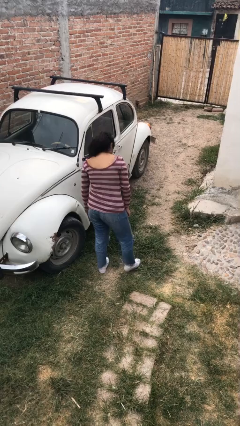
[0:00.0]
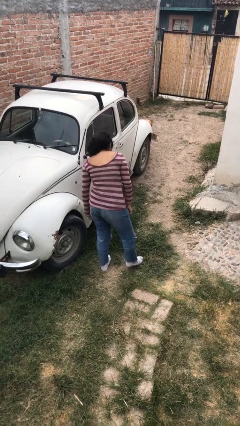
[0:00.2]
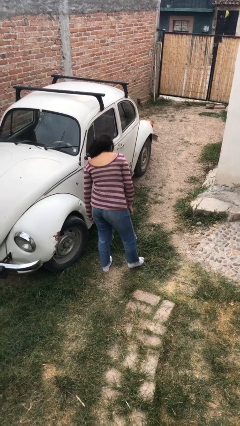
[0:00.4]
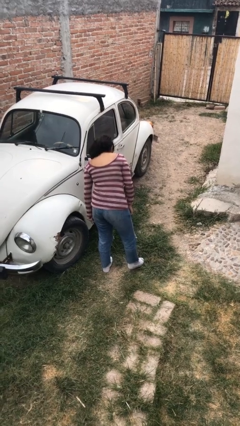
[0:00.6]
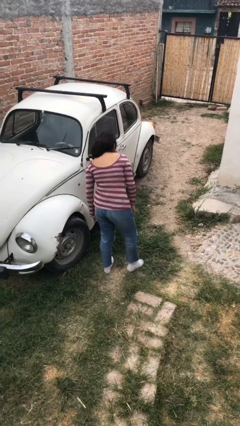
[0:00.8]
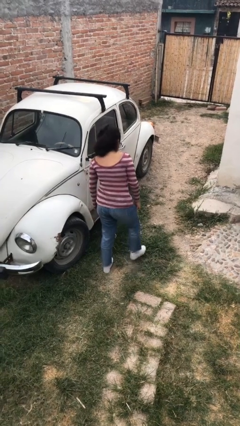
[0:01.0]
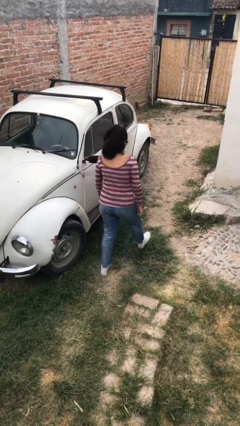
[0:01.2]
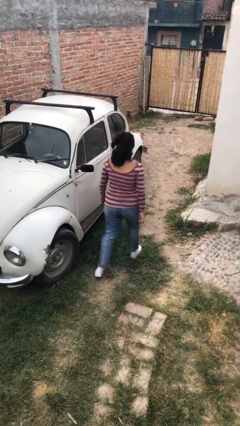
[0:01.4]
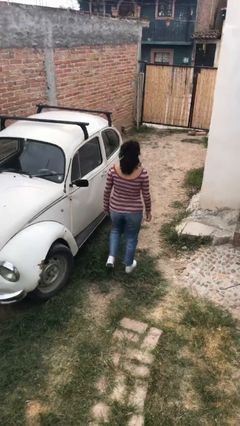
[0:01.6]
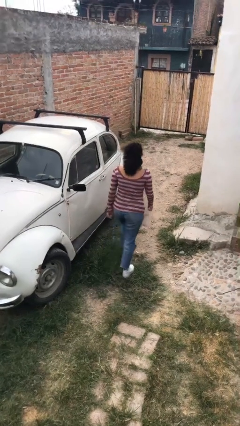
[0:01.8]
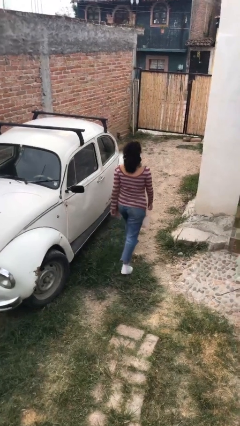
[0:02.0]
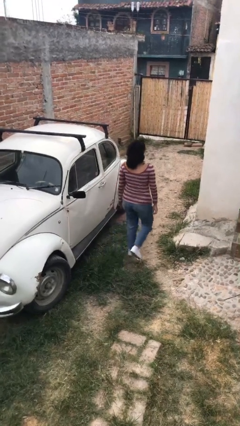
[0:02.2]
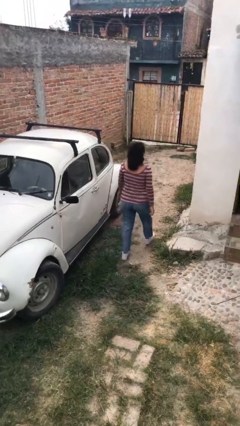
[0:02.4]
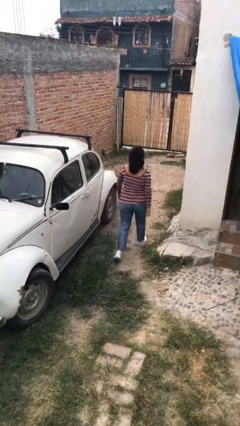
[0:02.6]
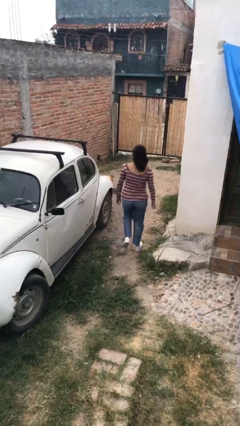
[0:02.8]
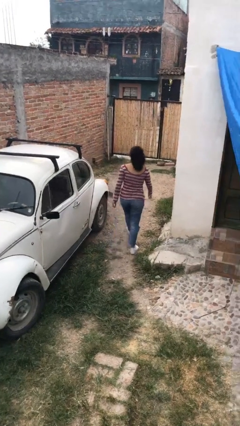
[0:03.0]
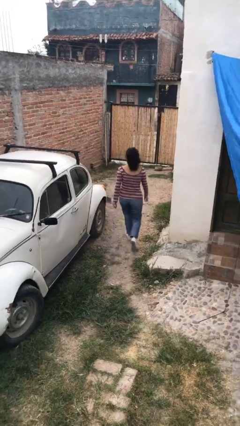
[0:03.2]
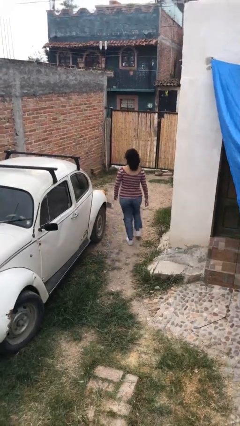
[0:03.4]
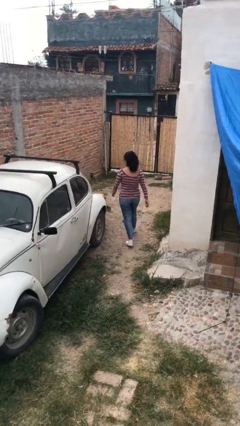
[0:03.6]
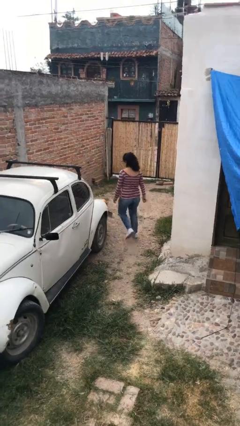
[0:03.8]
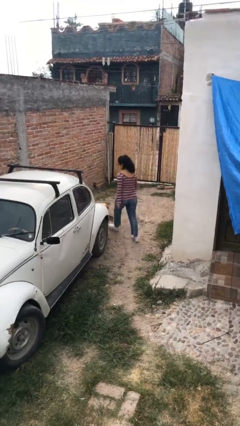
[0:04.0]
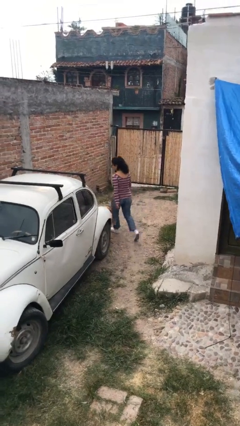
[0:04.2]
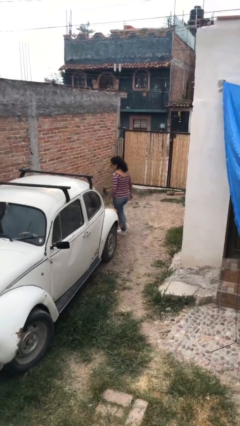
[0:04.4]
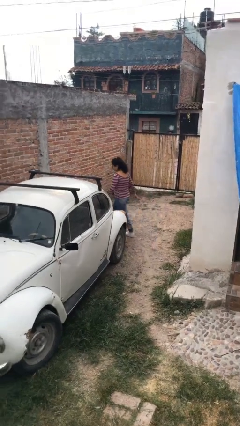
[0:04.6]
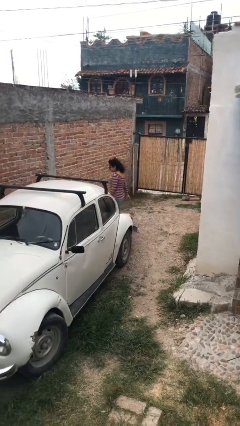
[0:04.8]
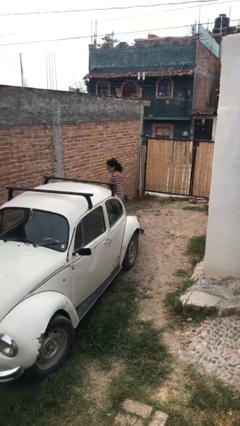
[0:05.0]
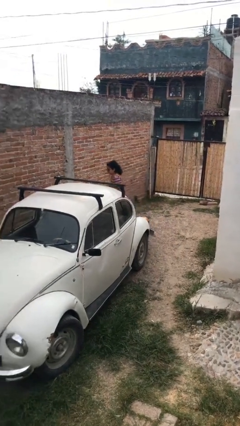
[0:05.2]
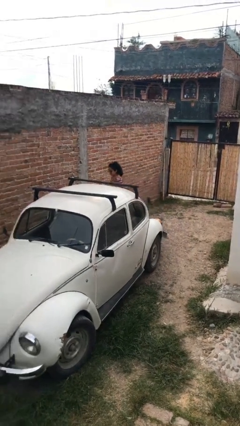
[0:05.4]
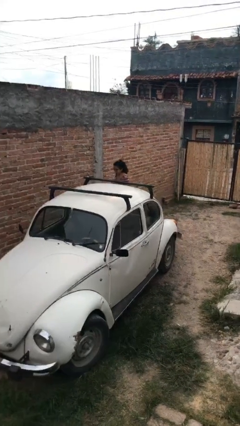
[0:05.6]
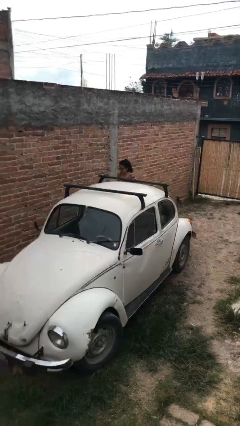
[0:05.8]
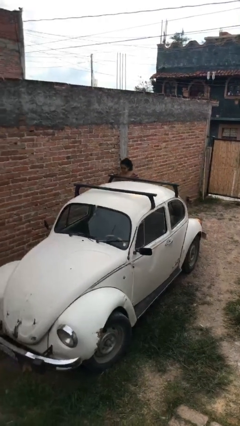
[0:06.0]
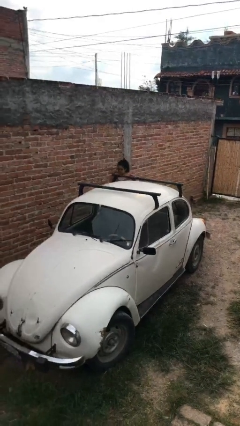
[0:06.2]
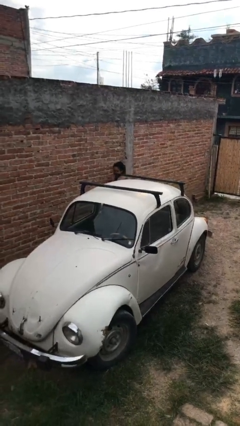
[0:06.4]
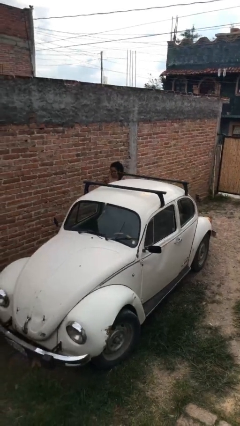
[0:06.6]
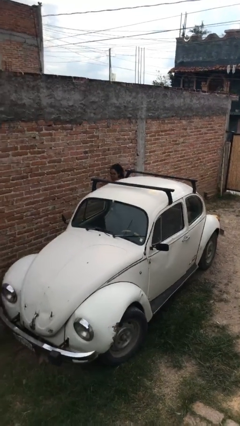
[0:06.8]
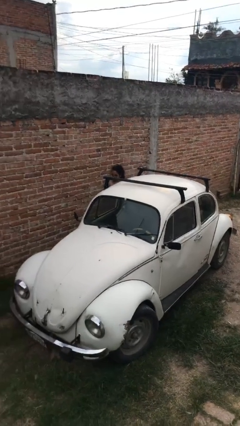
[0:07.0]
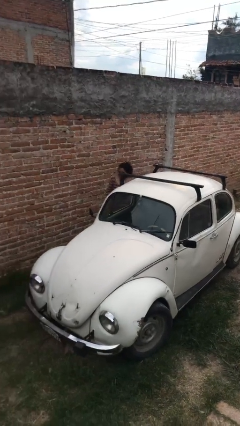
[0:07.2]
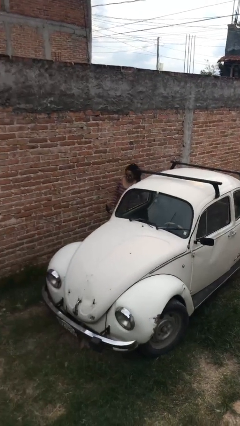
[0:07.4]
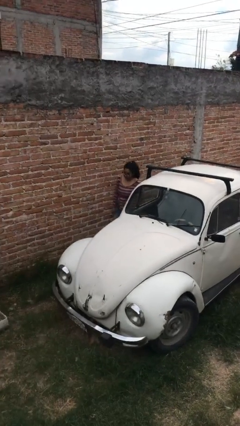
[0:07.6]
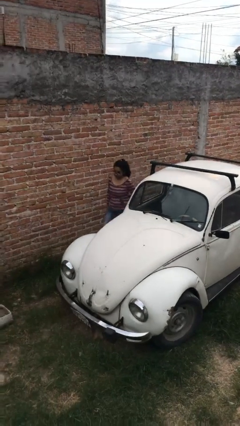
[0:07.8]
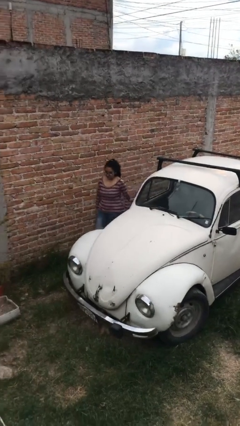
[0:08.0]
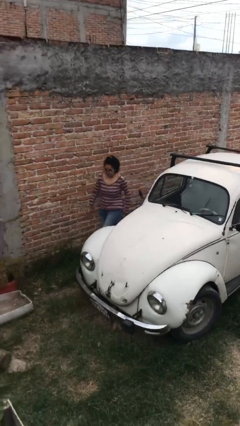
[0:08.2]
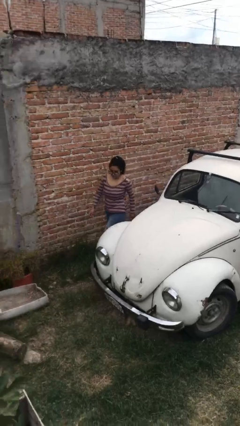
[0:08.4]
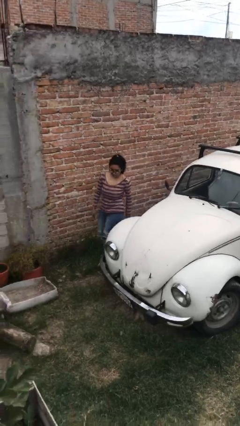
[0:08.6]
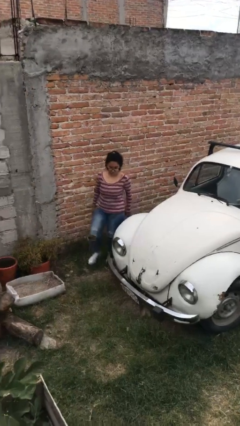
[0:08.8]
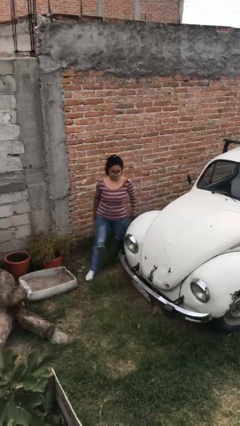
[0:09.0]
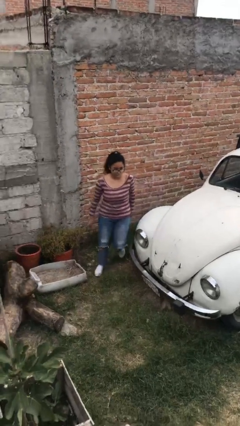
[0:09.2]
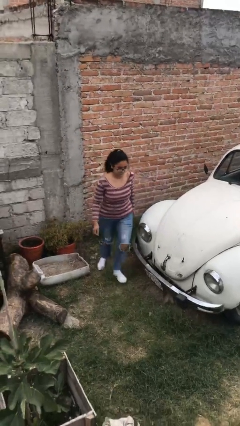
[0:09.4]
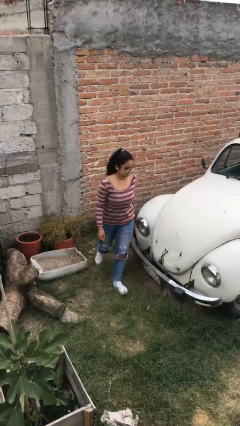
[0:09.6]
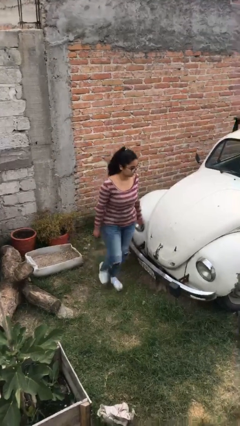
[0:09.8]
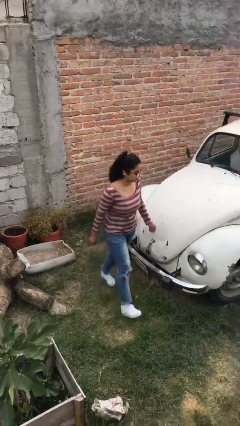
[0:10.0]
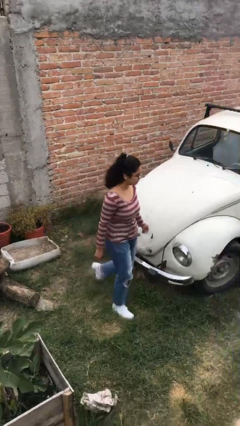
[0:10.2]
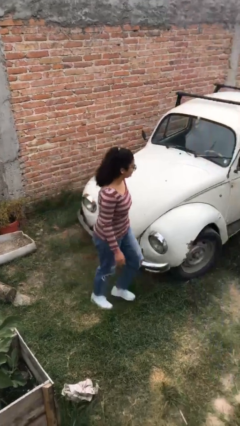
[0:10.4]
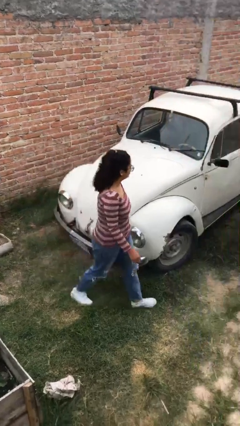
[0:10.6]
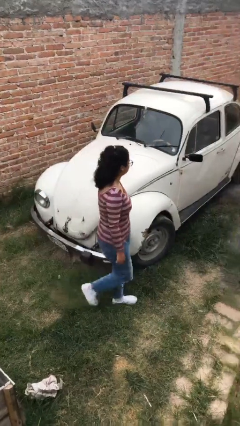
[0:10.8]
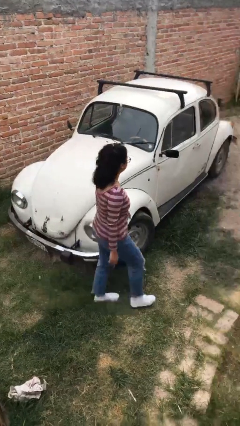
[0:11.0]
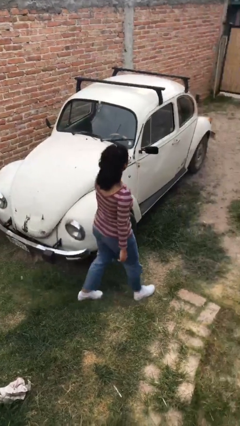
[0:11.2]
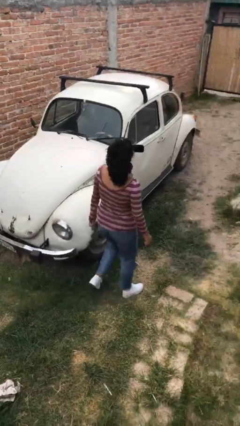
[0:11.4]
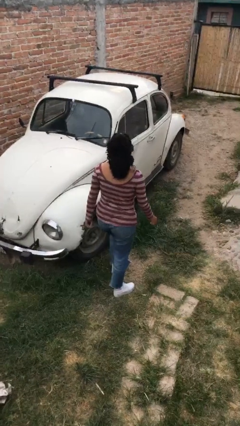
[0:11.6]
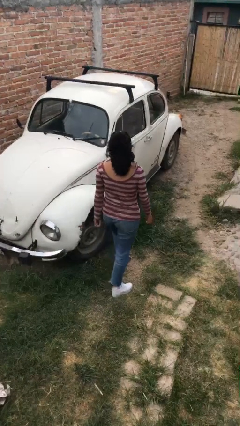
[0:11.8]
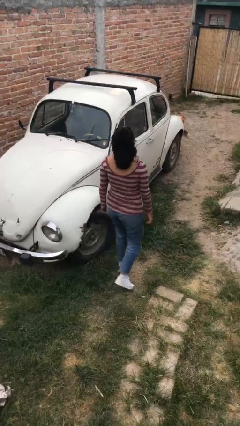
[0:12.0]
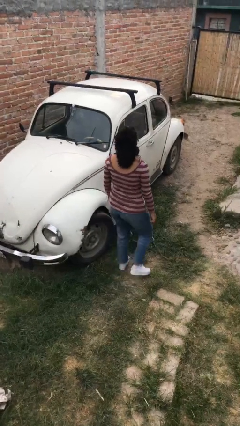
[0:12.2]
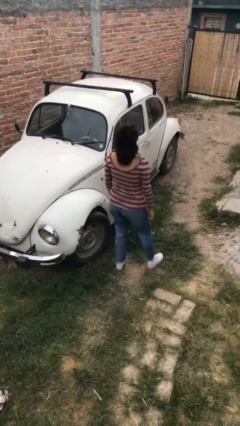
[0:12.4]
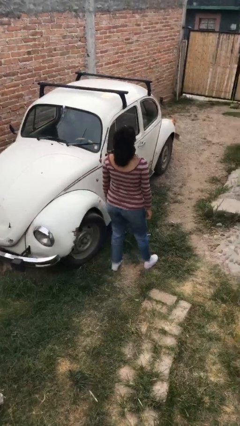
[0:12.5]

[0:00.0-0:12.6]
person walks around car

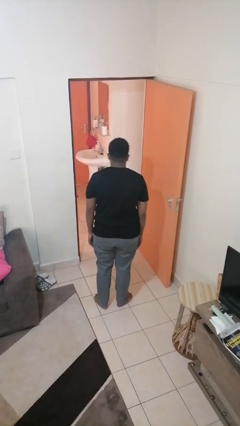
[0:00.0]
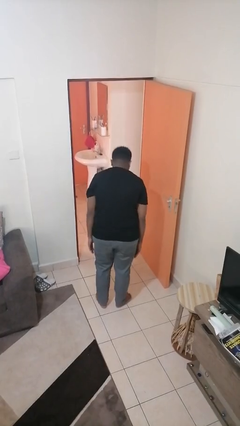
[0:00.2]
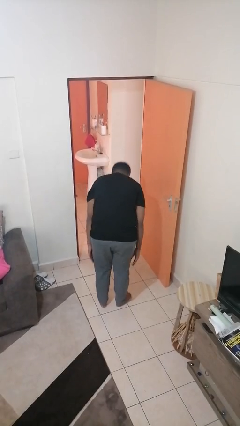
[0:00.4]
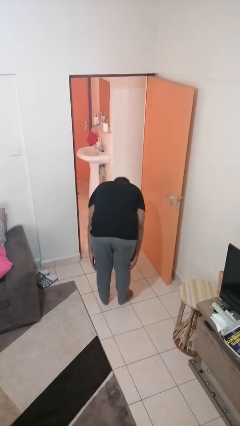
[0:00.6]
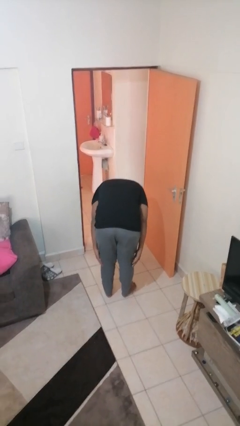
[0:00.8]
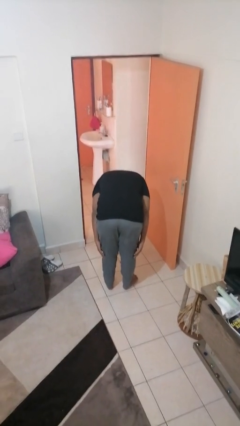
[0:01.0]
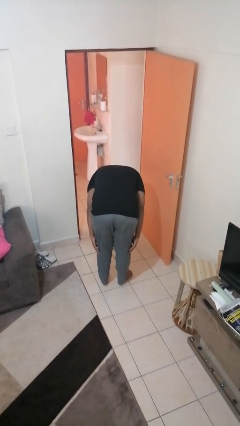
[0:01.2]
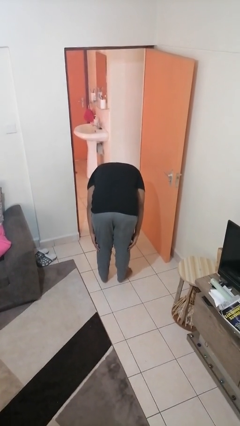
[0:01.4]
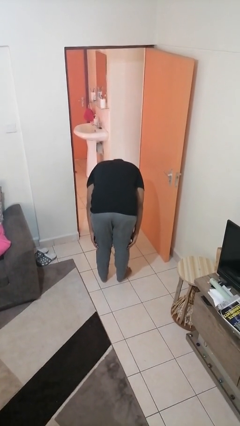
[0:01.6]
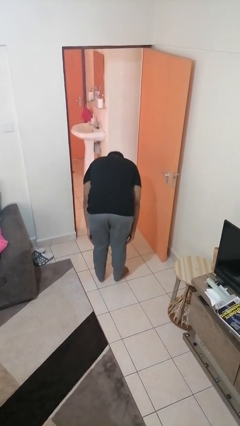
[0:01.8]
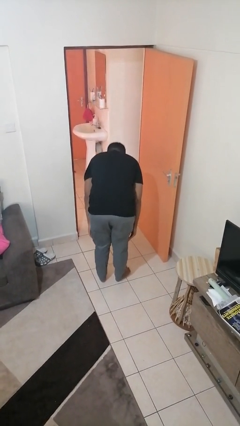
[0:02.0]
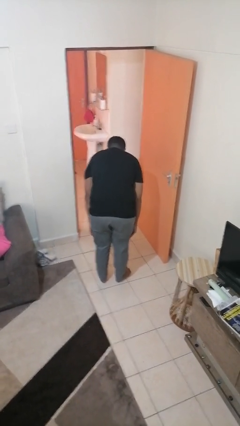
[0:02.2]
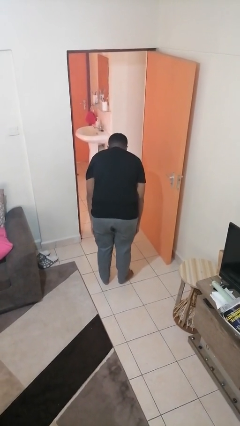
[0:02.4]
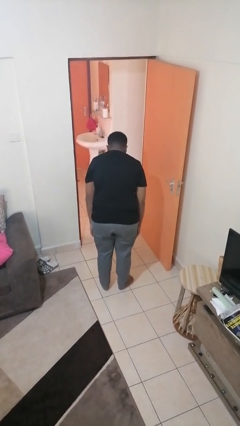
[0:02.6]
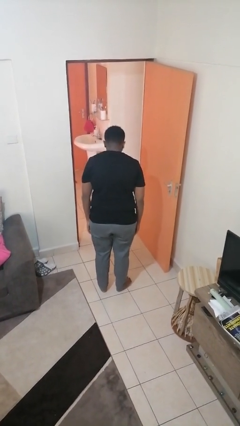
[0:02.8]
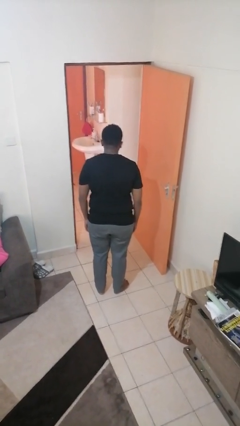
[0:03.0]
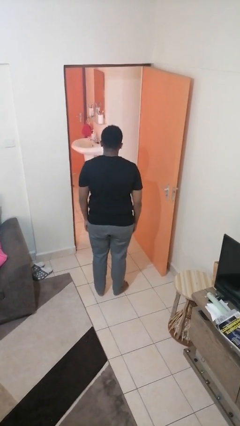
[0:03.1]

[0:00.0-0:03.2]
person bows

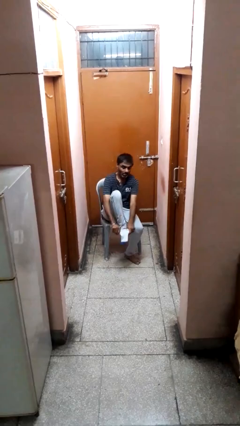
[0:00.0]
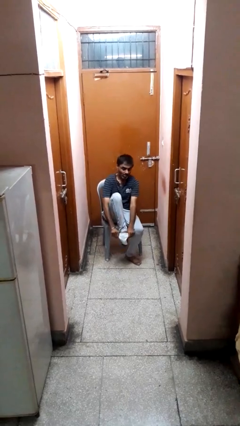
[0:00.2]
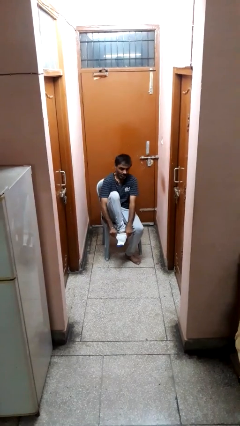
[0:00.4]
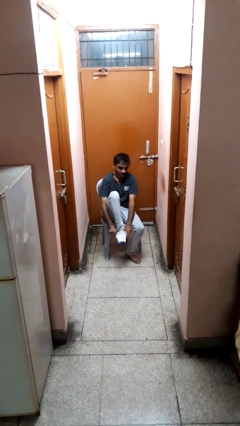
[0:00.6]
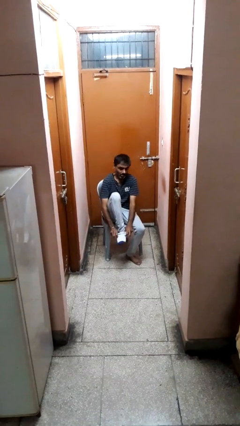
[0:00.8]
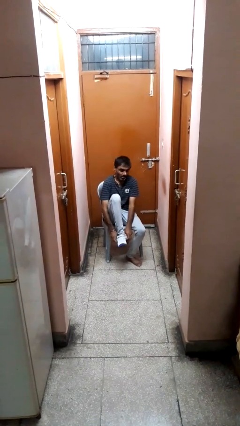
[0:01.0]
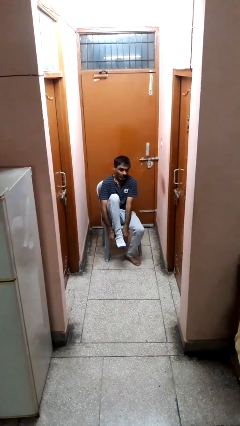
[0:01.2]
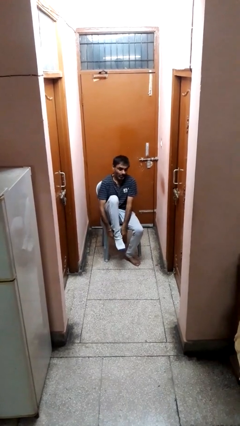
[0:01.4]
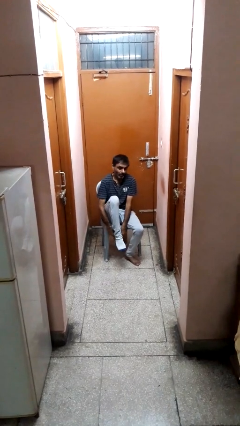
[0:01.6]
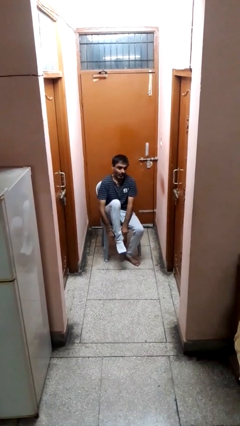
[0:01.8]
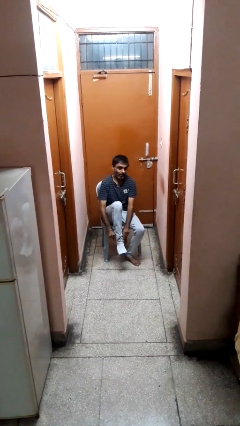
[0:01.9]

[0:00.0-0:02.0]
person puts on socks

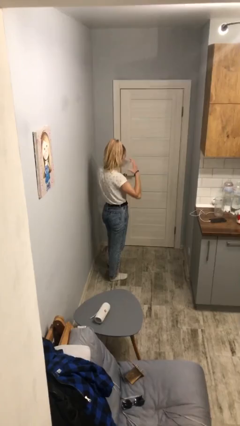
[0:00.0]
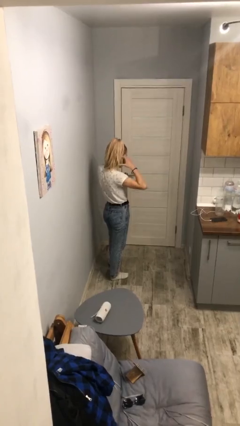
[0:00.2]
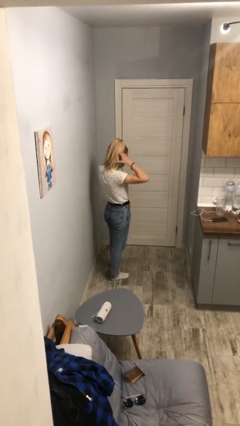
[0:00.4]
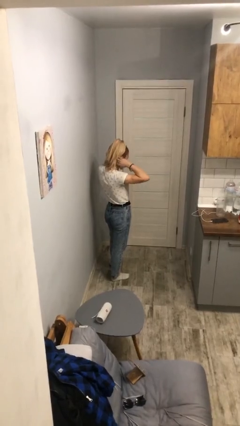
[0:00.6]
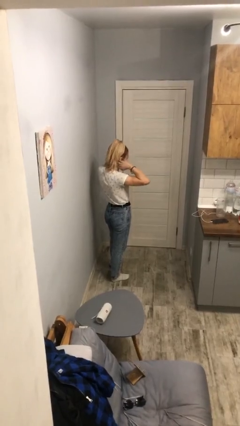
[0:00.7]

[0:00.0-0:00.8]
person puts on facemask
